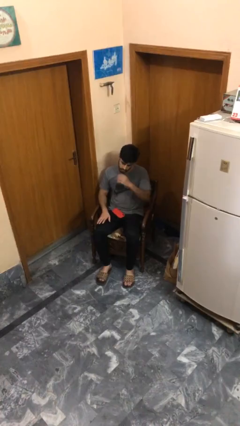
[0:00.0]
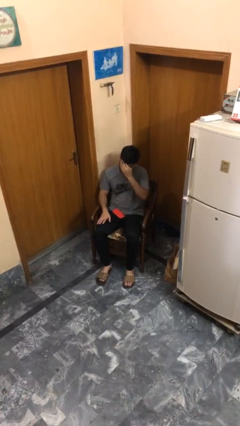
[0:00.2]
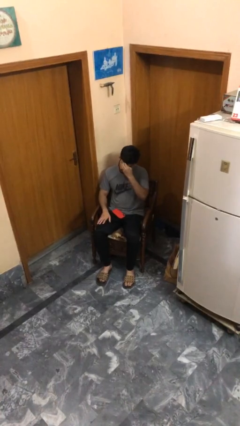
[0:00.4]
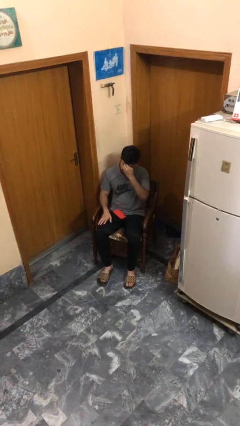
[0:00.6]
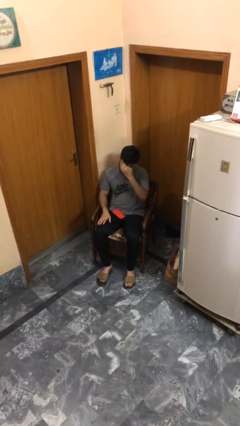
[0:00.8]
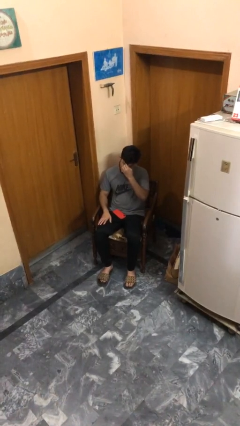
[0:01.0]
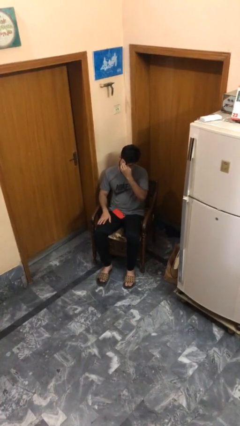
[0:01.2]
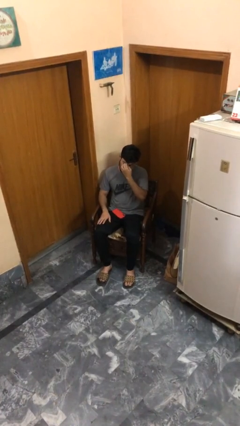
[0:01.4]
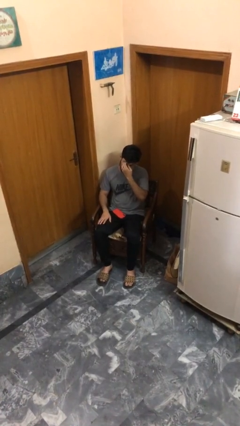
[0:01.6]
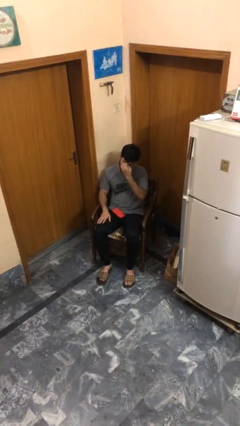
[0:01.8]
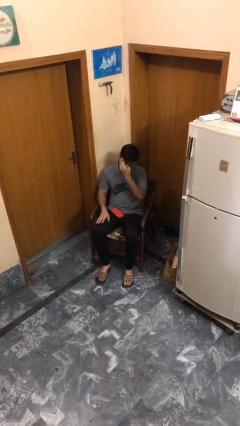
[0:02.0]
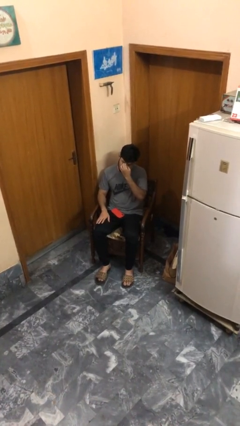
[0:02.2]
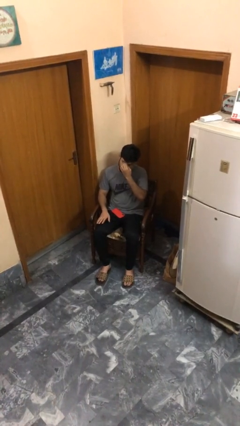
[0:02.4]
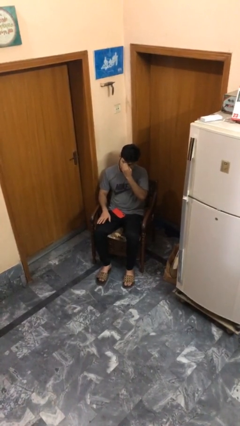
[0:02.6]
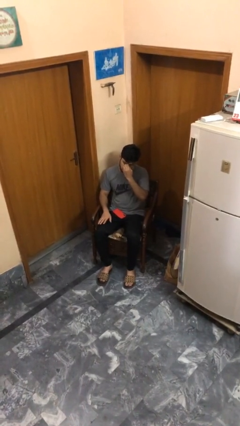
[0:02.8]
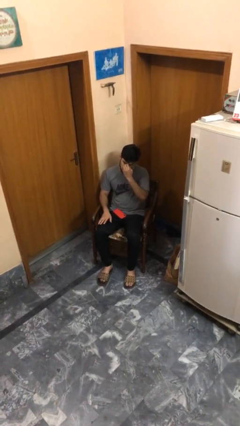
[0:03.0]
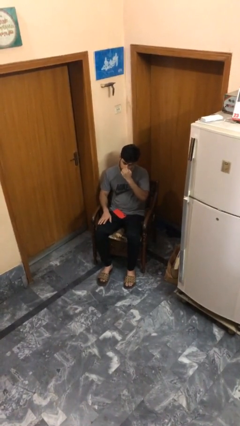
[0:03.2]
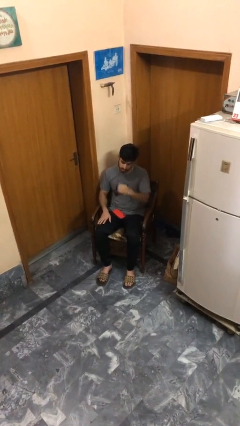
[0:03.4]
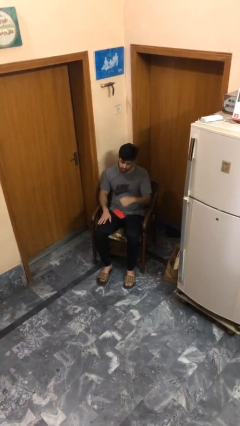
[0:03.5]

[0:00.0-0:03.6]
person scratches face

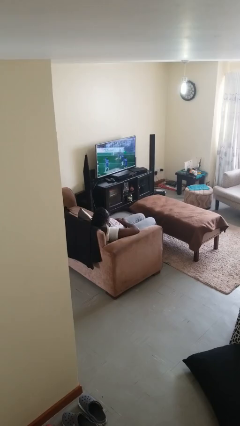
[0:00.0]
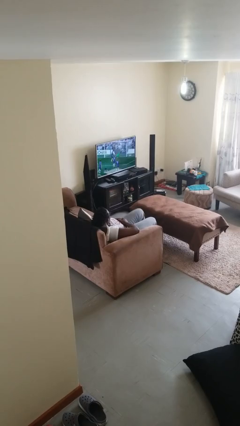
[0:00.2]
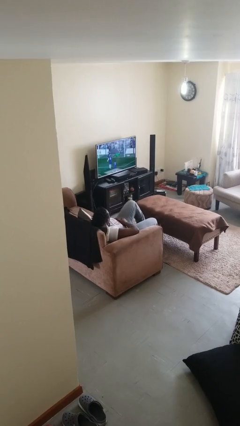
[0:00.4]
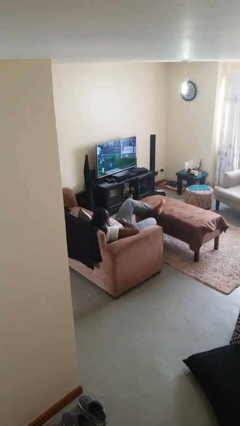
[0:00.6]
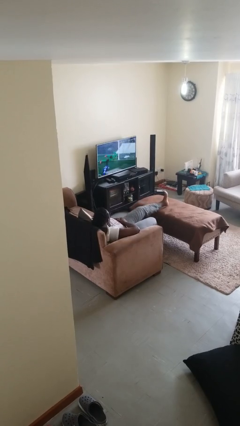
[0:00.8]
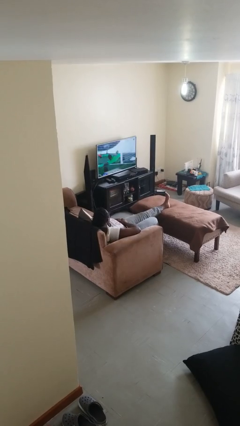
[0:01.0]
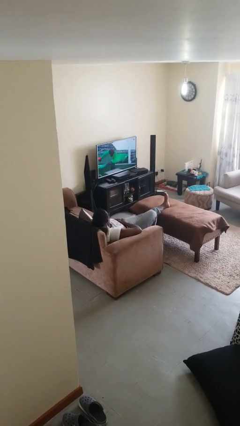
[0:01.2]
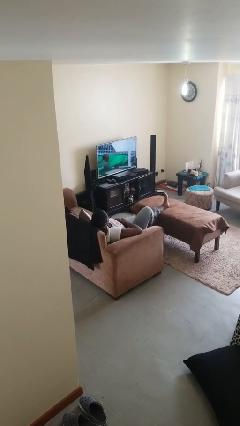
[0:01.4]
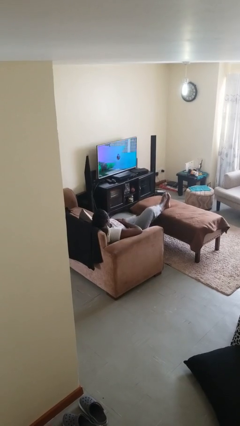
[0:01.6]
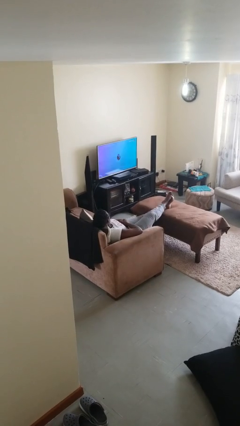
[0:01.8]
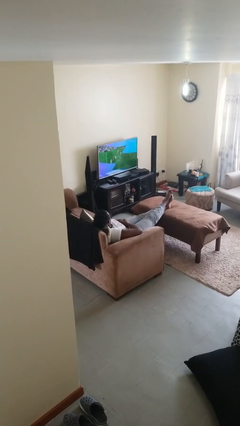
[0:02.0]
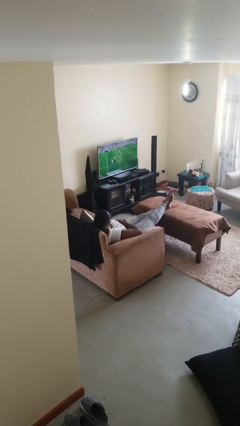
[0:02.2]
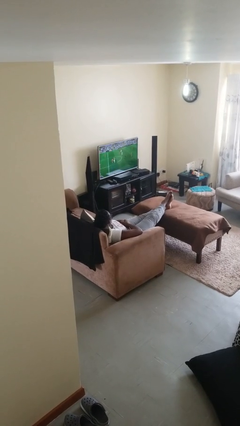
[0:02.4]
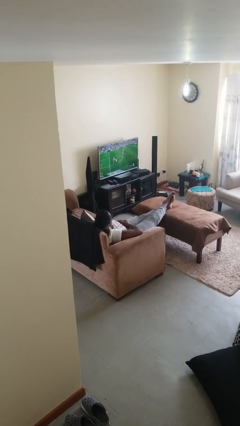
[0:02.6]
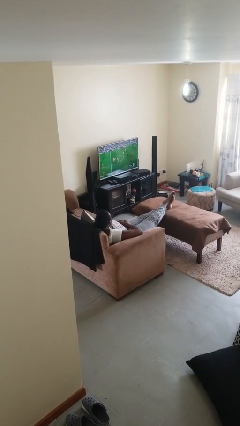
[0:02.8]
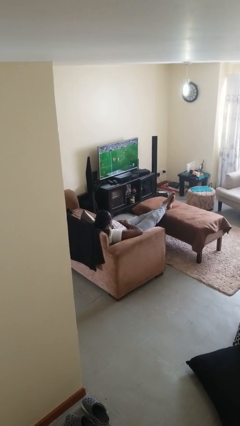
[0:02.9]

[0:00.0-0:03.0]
person puts feet up

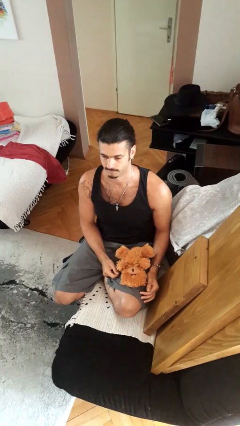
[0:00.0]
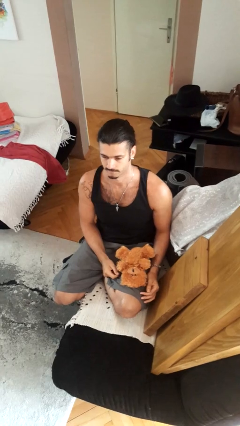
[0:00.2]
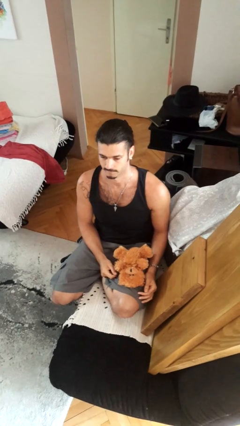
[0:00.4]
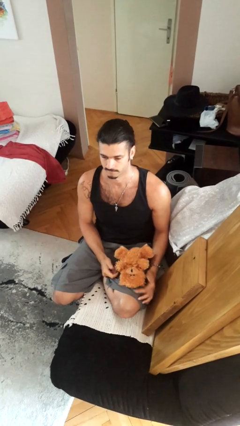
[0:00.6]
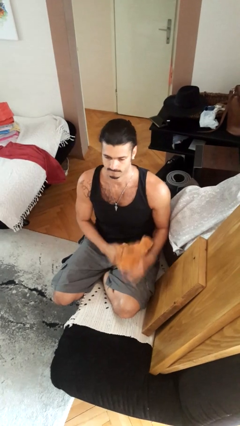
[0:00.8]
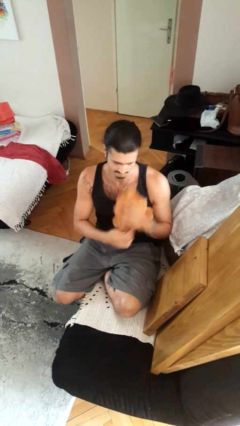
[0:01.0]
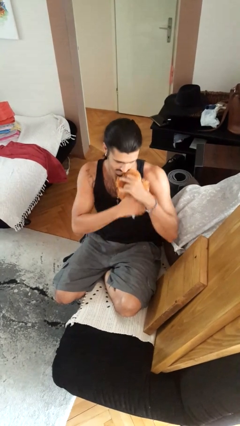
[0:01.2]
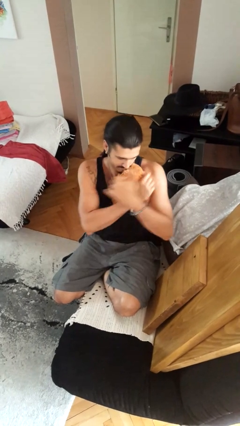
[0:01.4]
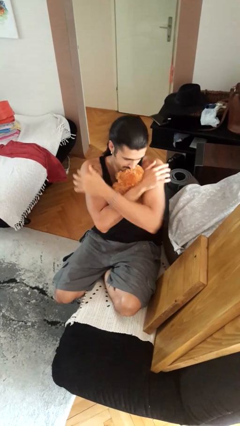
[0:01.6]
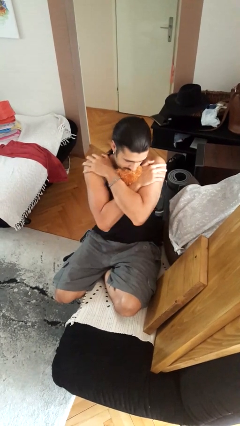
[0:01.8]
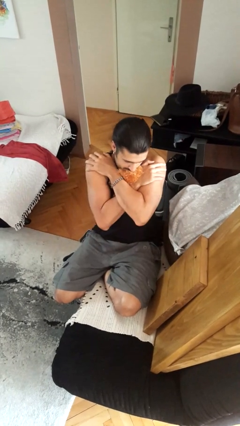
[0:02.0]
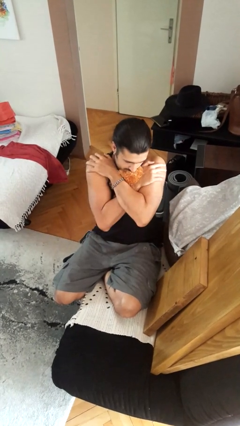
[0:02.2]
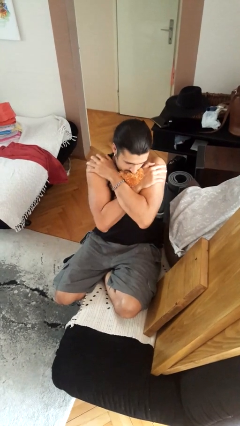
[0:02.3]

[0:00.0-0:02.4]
person hugs stuffed animal

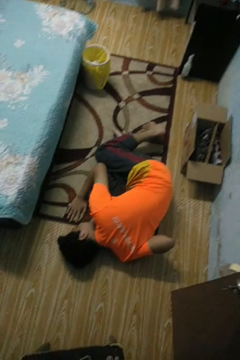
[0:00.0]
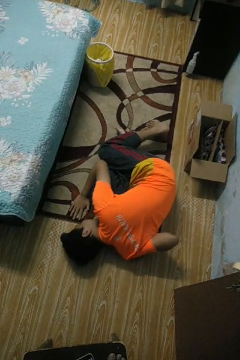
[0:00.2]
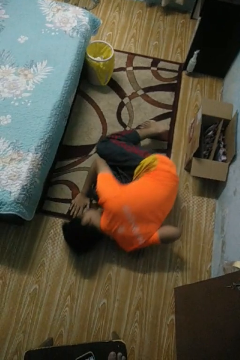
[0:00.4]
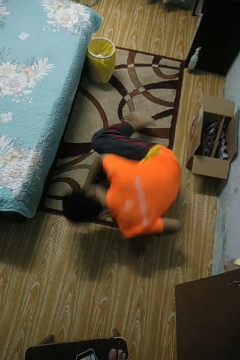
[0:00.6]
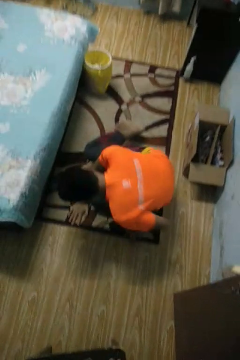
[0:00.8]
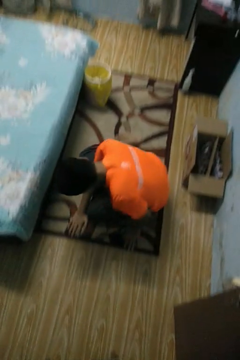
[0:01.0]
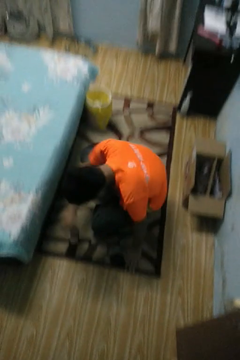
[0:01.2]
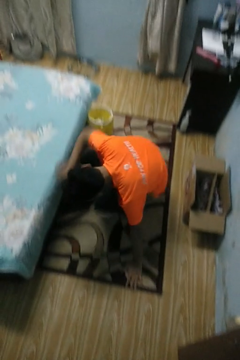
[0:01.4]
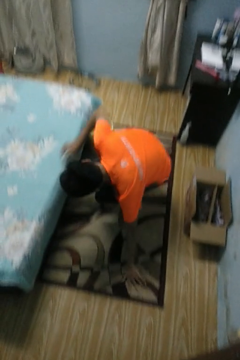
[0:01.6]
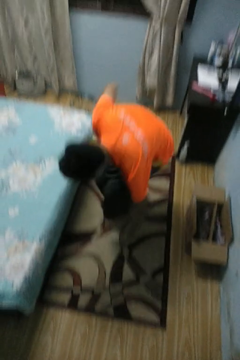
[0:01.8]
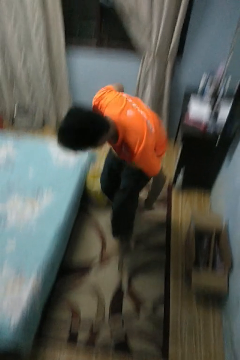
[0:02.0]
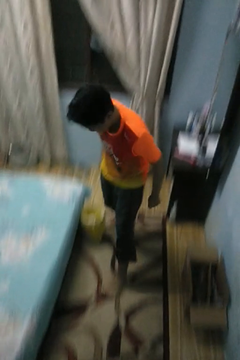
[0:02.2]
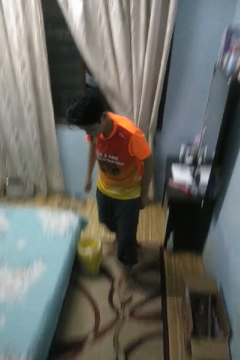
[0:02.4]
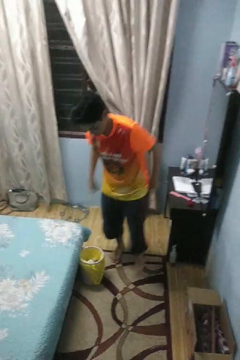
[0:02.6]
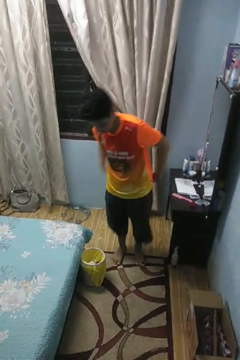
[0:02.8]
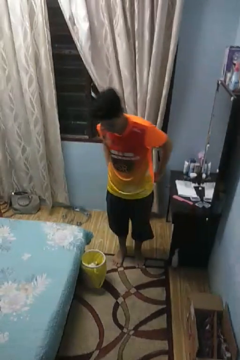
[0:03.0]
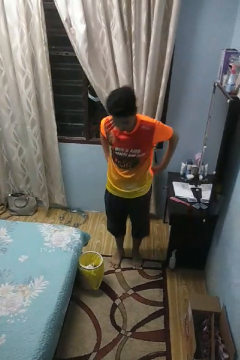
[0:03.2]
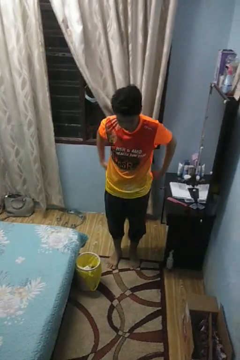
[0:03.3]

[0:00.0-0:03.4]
person stands up from floor

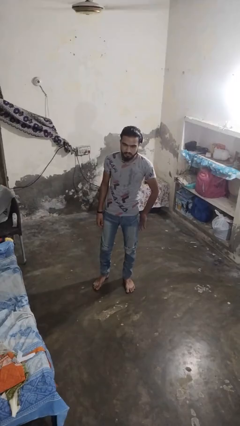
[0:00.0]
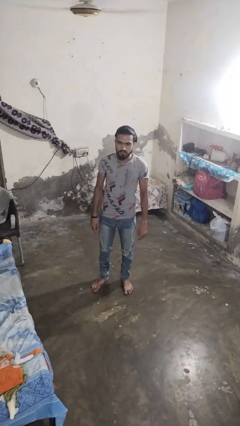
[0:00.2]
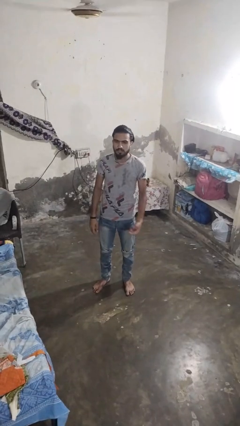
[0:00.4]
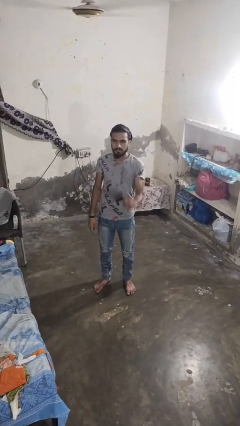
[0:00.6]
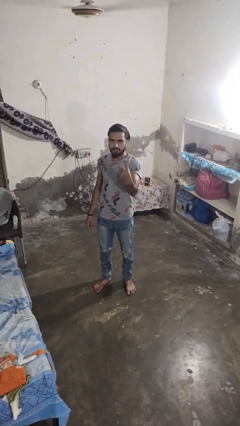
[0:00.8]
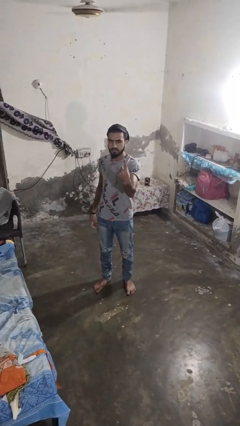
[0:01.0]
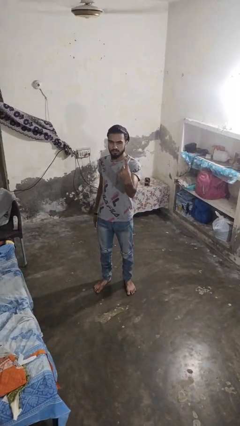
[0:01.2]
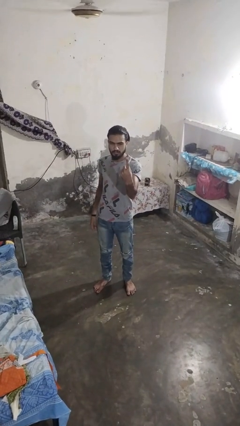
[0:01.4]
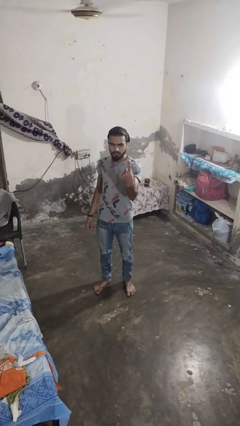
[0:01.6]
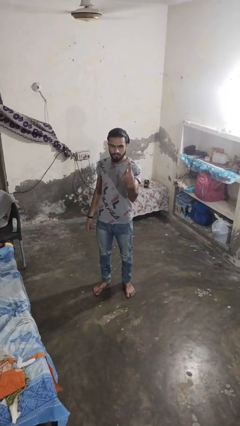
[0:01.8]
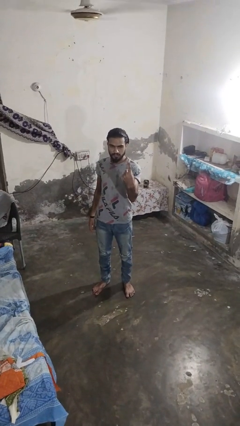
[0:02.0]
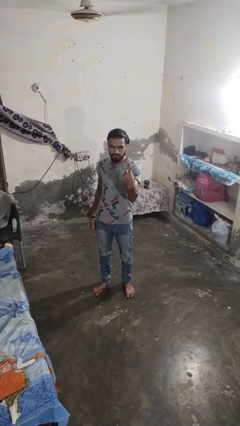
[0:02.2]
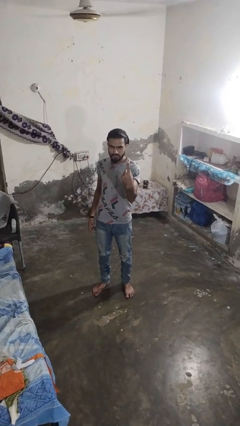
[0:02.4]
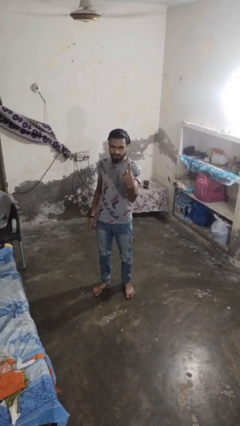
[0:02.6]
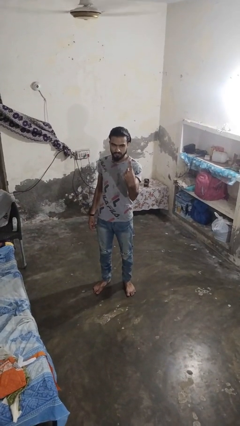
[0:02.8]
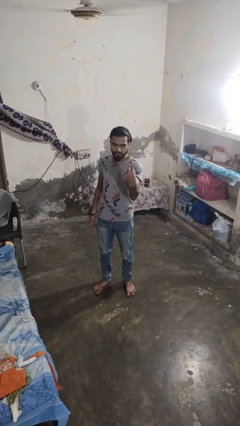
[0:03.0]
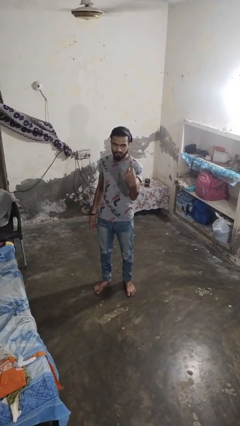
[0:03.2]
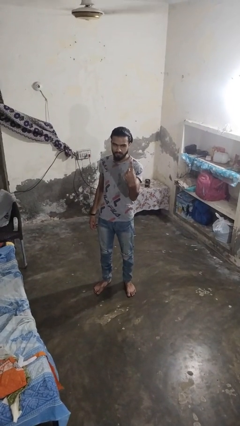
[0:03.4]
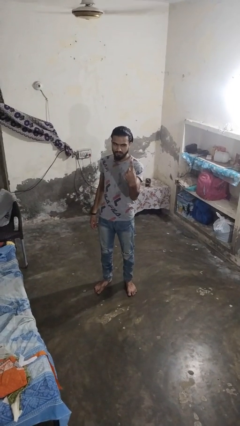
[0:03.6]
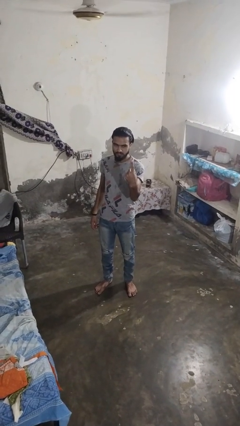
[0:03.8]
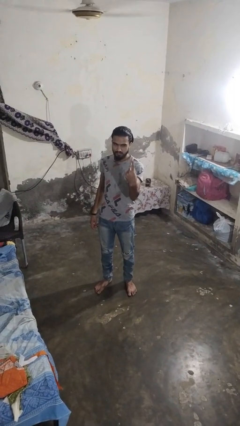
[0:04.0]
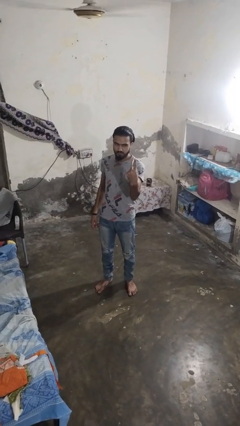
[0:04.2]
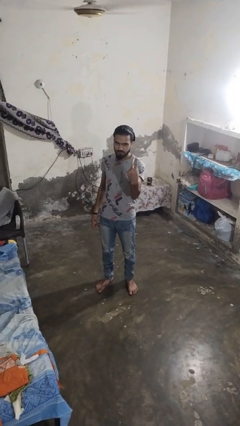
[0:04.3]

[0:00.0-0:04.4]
person gestures number one

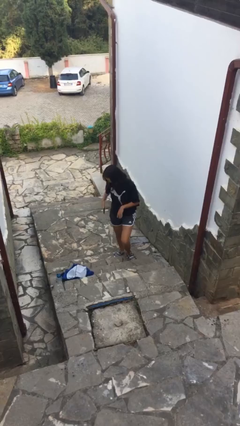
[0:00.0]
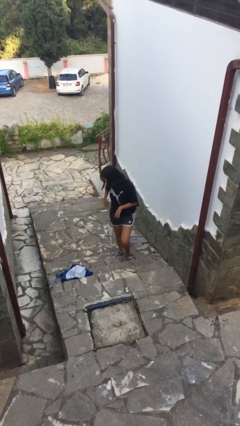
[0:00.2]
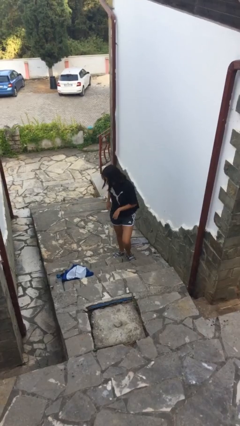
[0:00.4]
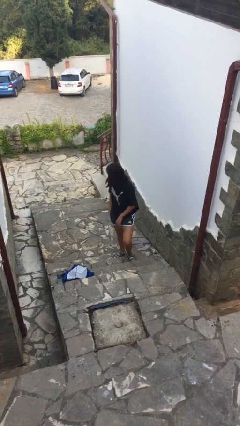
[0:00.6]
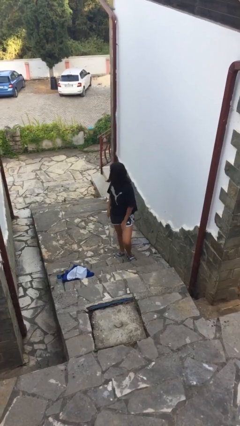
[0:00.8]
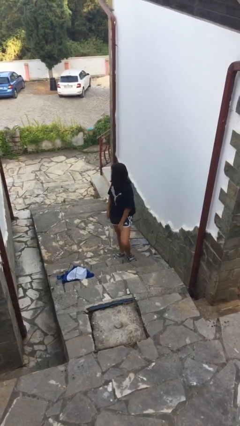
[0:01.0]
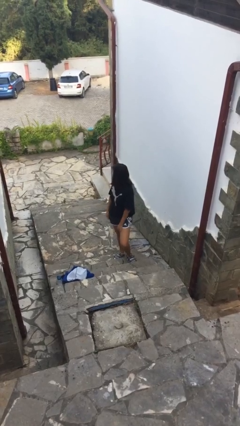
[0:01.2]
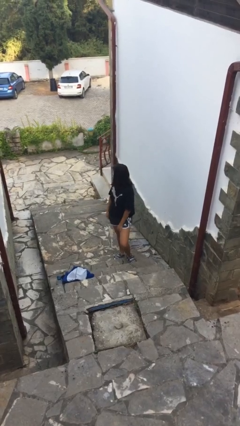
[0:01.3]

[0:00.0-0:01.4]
person puts phone into pocket
